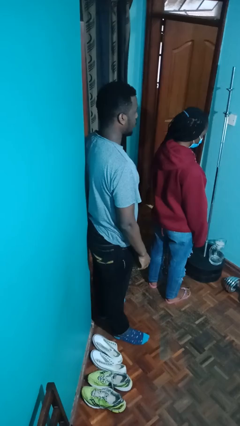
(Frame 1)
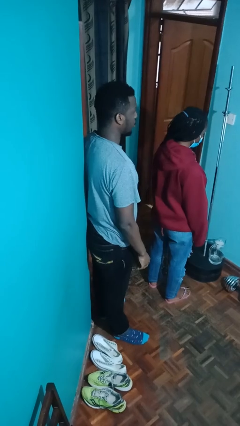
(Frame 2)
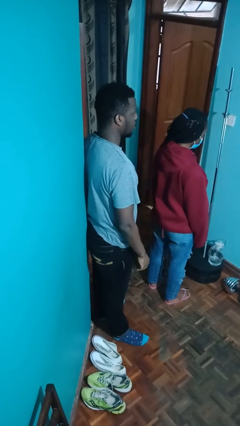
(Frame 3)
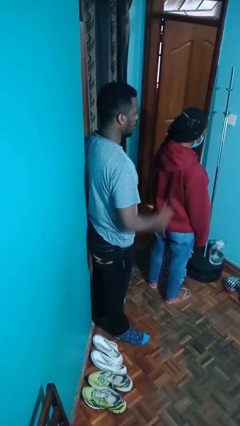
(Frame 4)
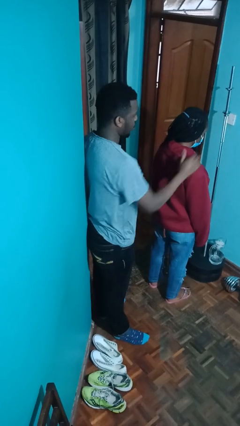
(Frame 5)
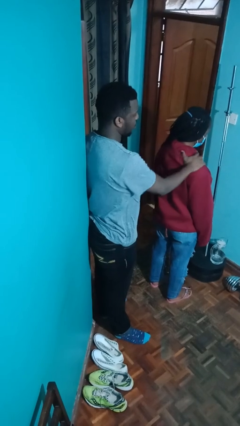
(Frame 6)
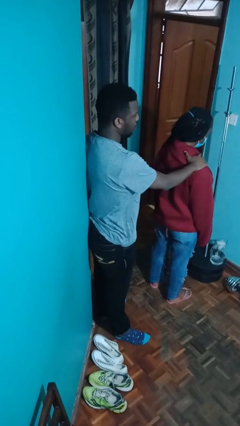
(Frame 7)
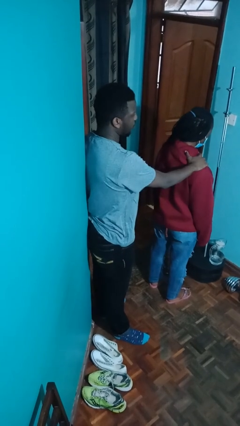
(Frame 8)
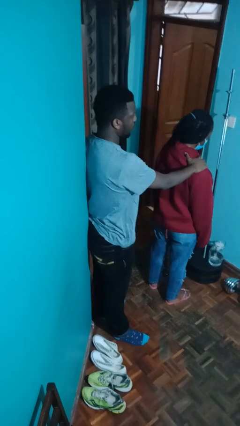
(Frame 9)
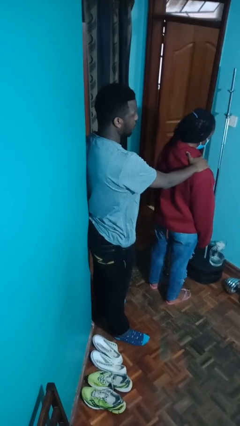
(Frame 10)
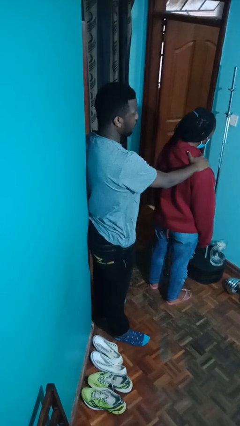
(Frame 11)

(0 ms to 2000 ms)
person grabs person by shoulder

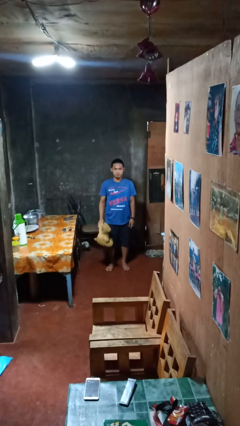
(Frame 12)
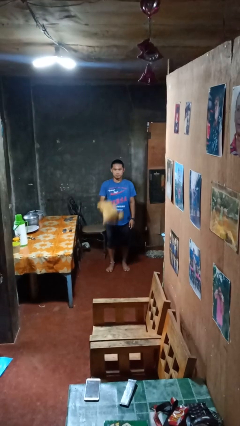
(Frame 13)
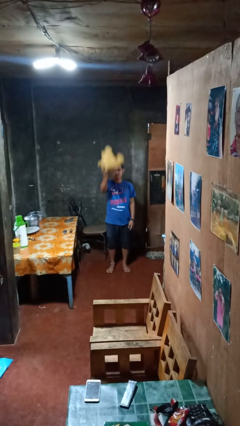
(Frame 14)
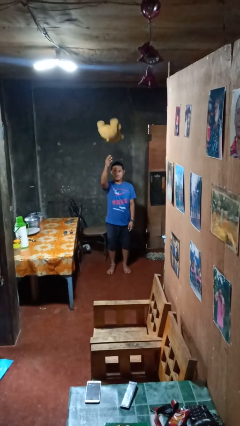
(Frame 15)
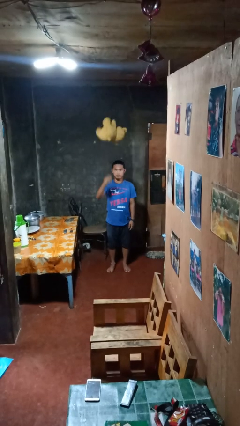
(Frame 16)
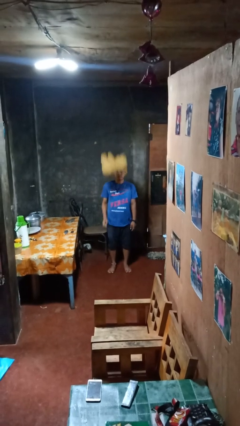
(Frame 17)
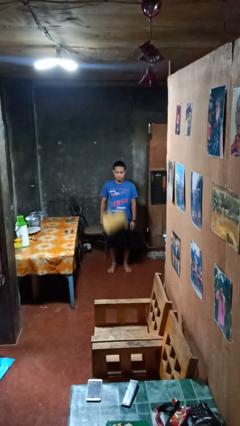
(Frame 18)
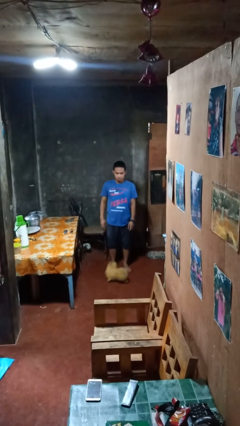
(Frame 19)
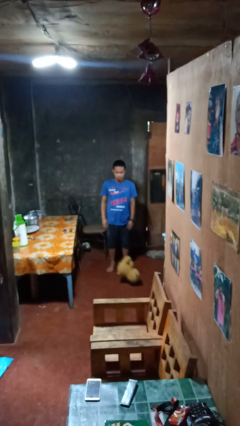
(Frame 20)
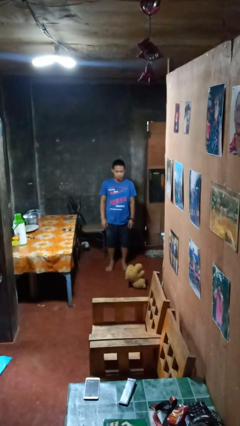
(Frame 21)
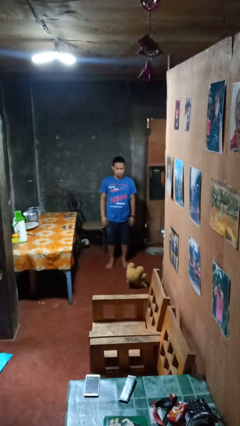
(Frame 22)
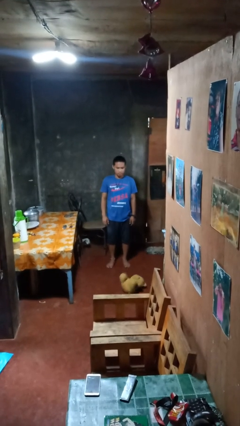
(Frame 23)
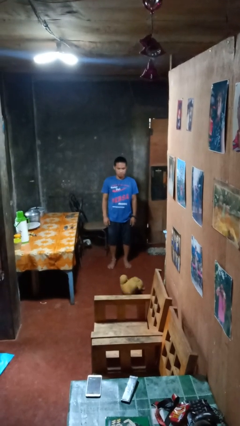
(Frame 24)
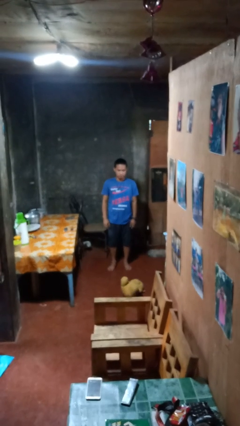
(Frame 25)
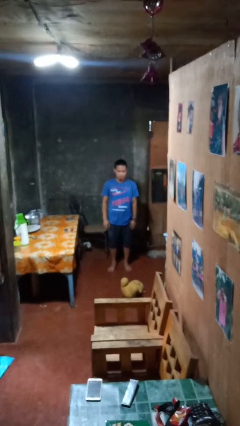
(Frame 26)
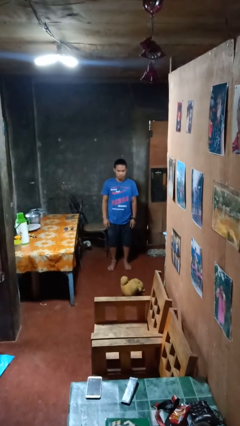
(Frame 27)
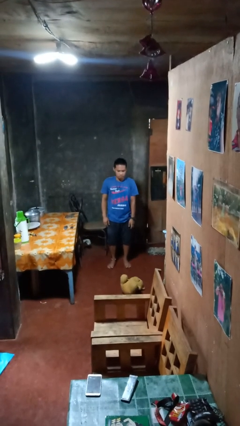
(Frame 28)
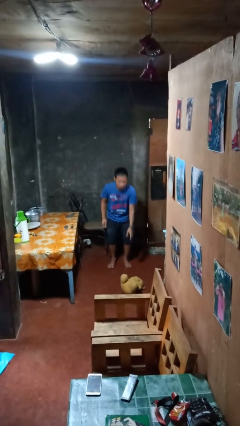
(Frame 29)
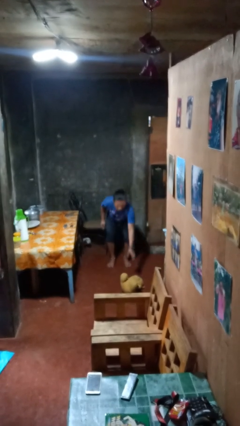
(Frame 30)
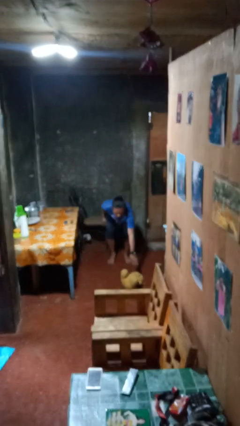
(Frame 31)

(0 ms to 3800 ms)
person throws object into air

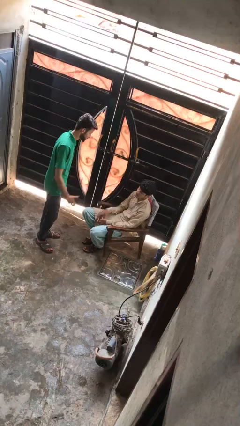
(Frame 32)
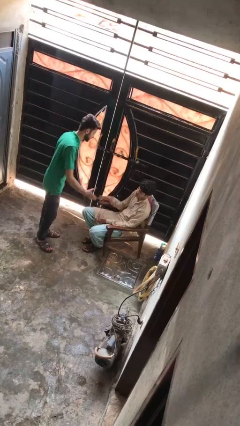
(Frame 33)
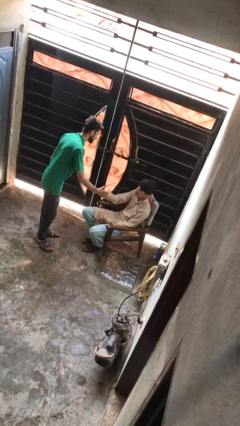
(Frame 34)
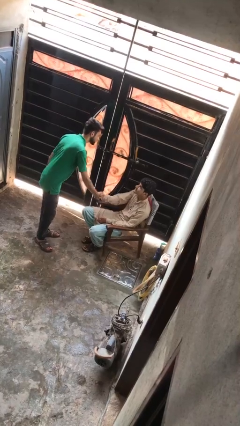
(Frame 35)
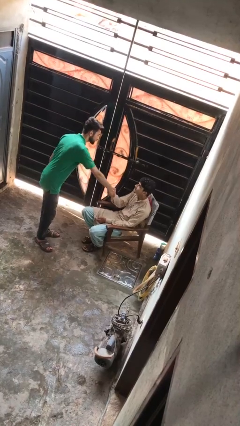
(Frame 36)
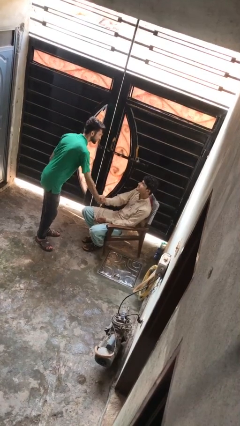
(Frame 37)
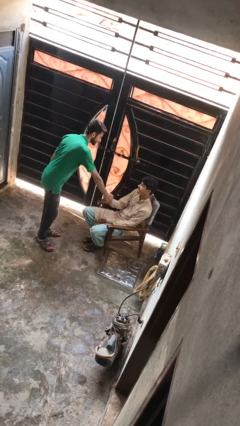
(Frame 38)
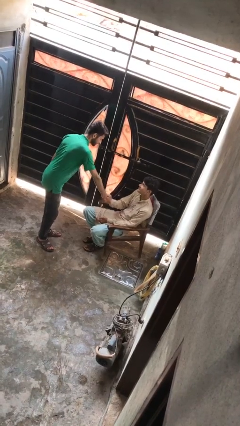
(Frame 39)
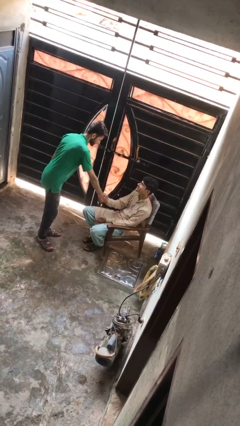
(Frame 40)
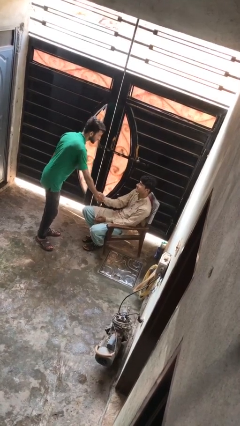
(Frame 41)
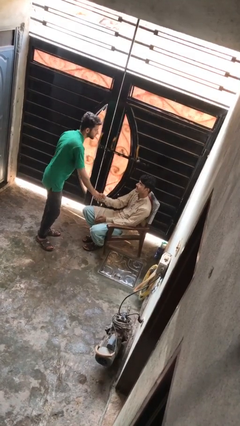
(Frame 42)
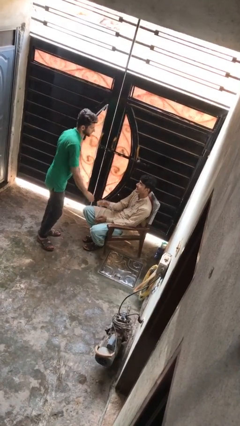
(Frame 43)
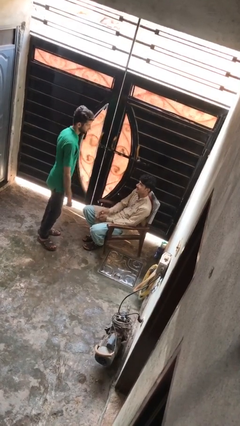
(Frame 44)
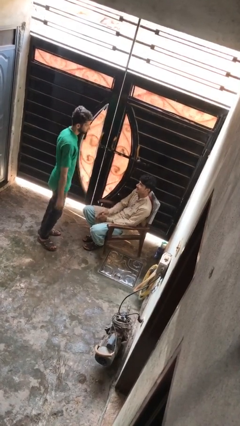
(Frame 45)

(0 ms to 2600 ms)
person shakes hand

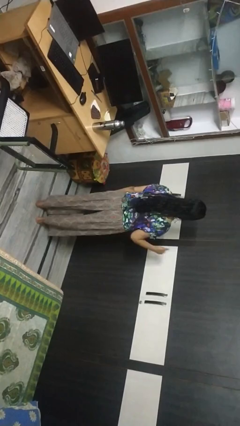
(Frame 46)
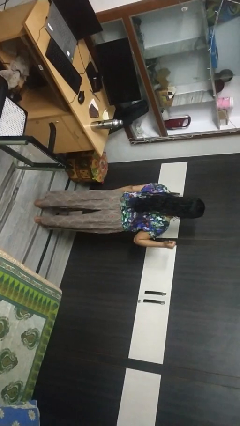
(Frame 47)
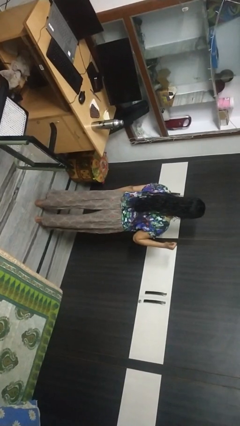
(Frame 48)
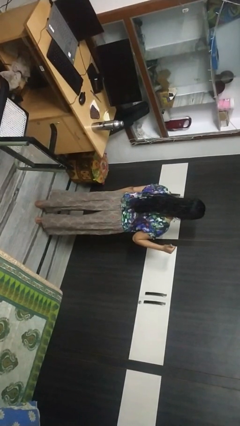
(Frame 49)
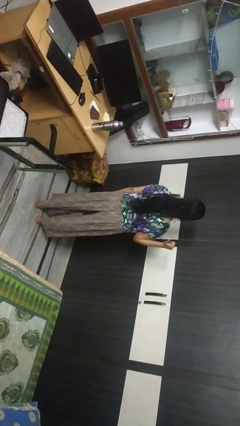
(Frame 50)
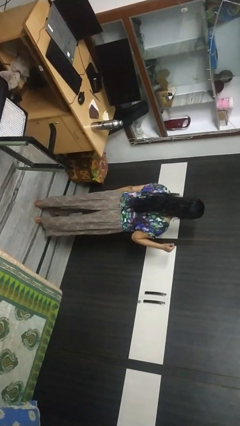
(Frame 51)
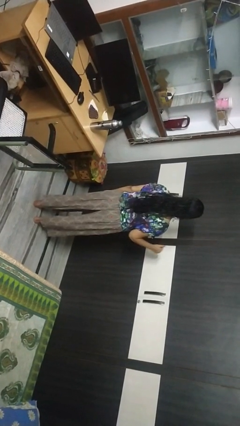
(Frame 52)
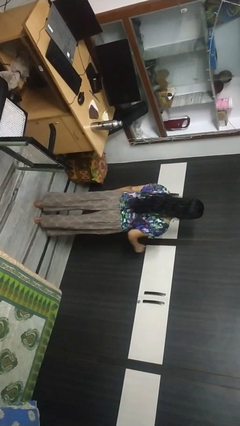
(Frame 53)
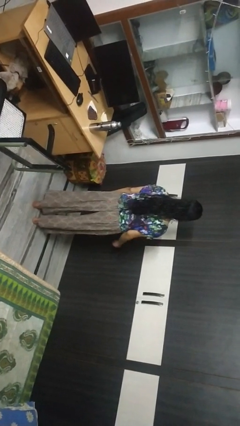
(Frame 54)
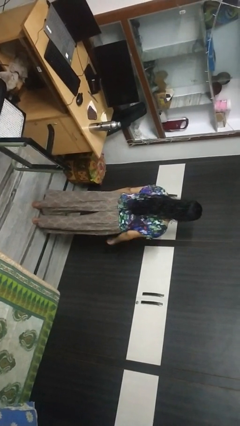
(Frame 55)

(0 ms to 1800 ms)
person gestures behind me

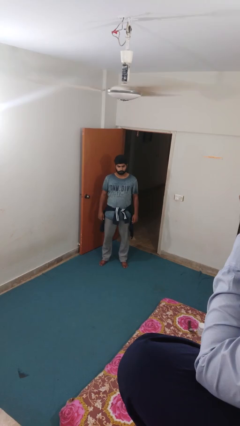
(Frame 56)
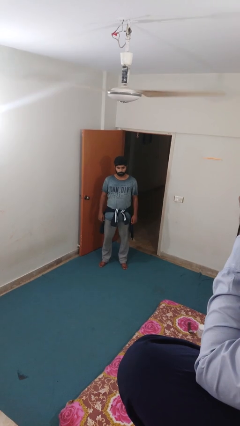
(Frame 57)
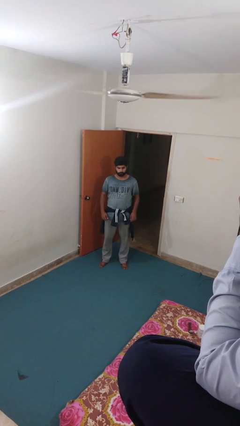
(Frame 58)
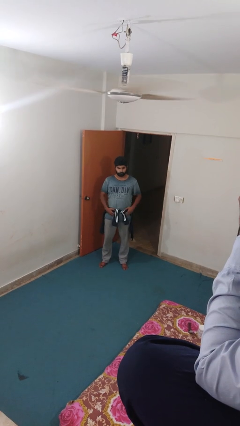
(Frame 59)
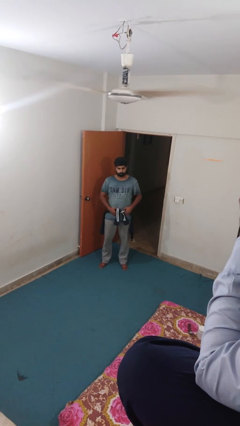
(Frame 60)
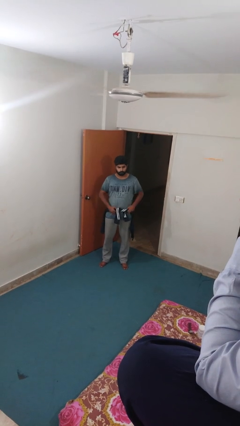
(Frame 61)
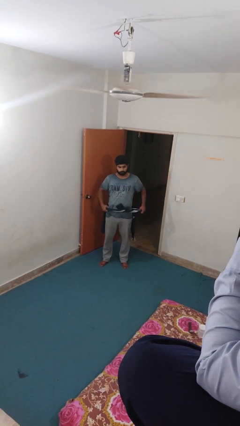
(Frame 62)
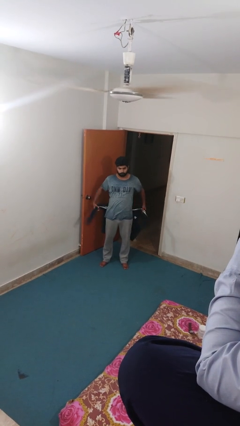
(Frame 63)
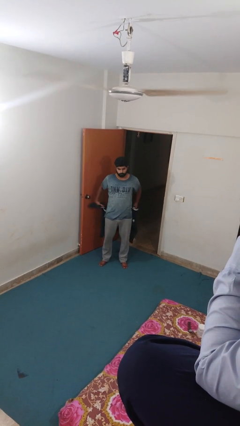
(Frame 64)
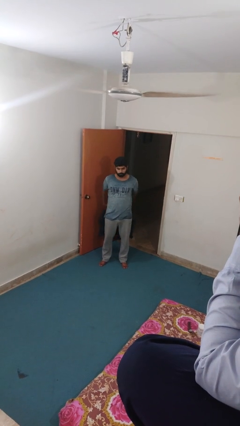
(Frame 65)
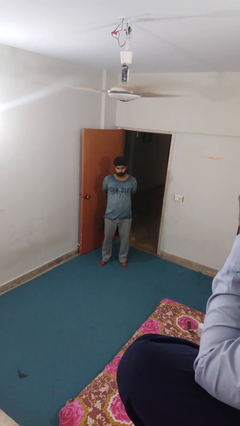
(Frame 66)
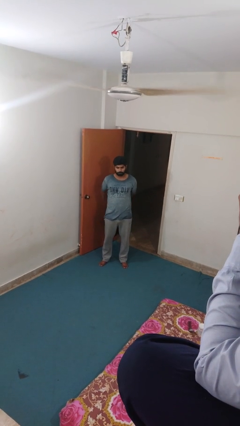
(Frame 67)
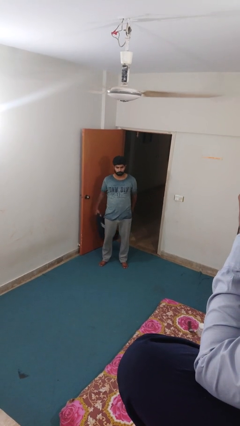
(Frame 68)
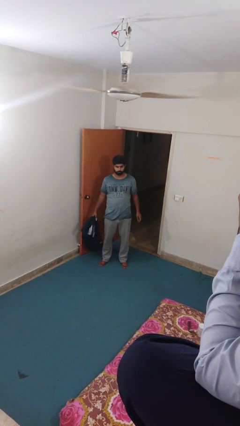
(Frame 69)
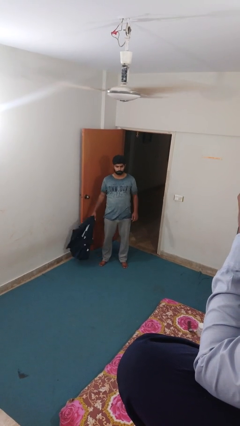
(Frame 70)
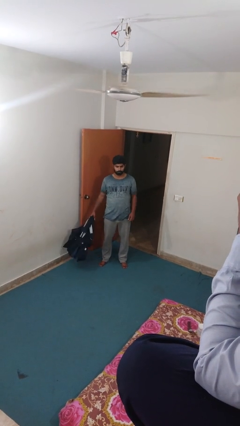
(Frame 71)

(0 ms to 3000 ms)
person unties jacket around waist

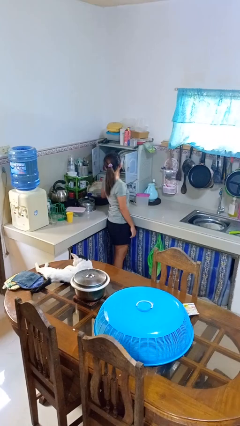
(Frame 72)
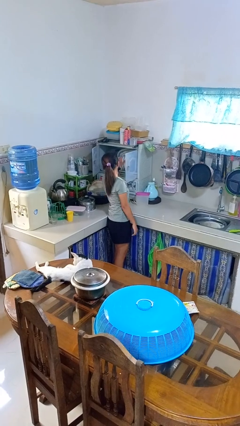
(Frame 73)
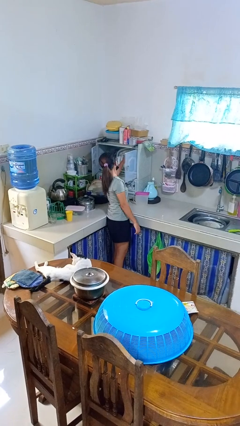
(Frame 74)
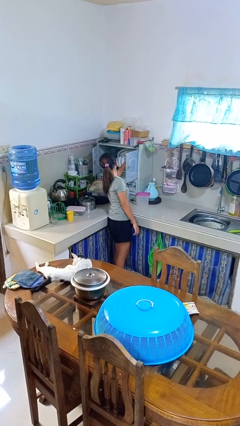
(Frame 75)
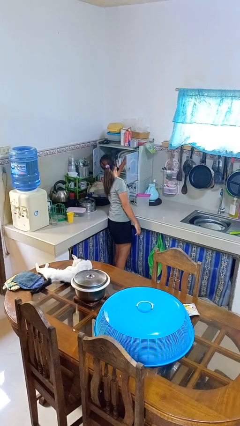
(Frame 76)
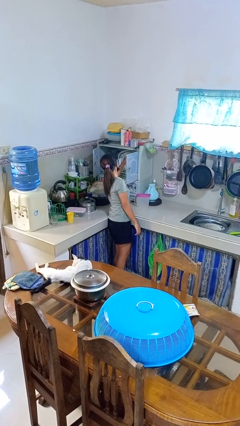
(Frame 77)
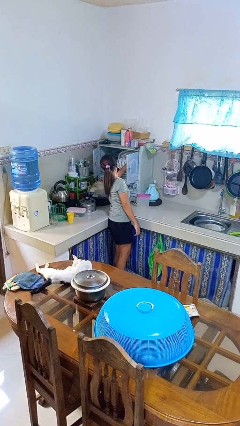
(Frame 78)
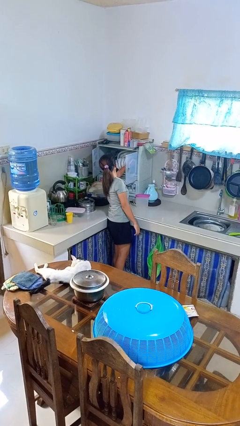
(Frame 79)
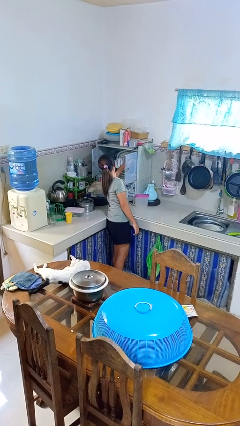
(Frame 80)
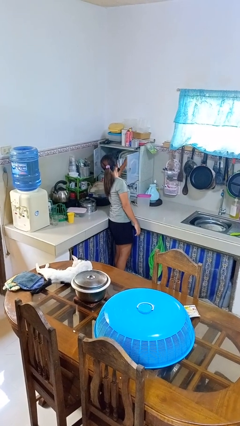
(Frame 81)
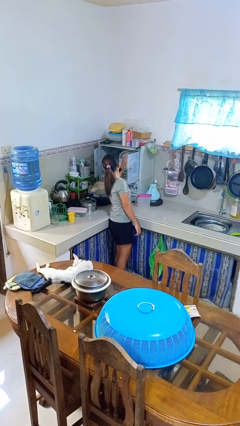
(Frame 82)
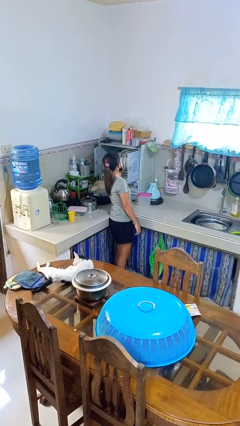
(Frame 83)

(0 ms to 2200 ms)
person searches in kitchen drawer

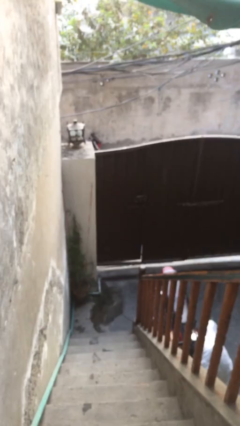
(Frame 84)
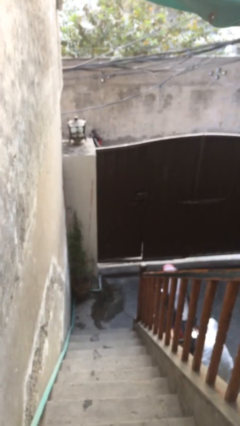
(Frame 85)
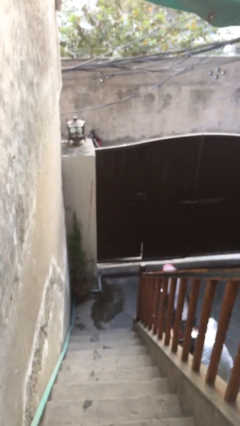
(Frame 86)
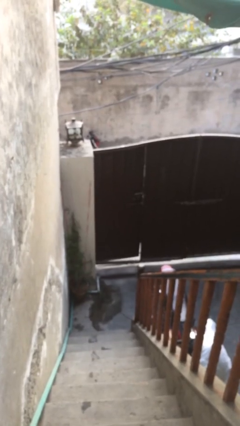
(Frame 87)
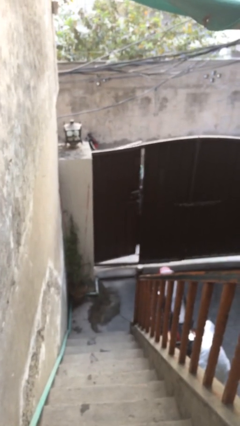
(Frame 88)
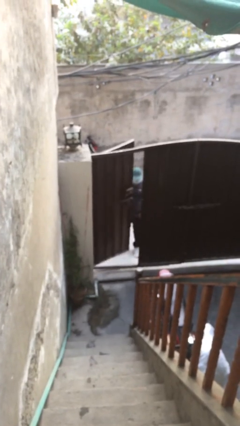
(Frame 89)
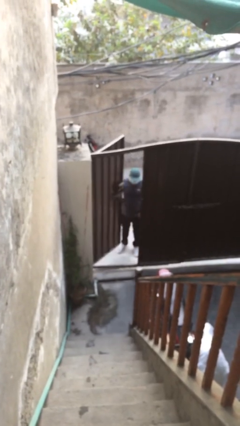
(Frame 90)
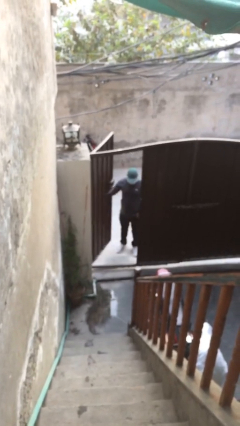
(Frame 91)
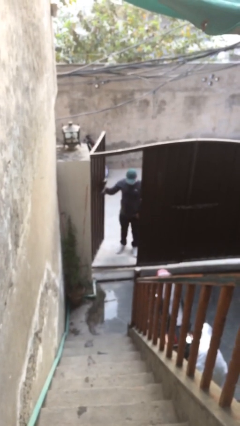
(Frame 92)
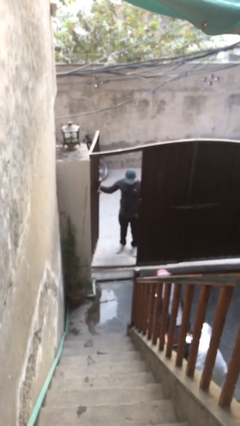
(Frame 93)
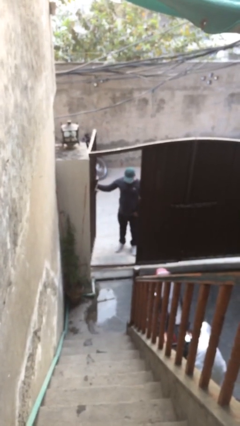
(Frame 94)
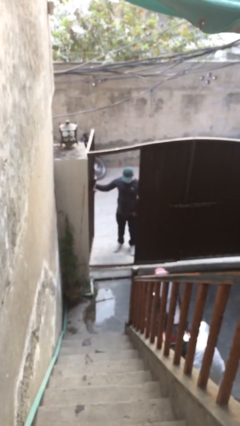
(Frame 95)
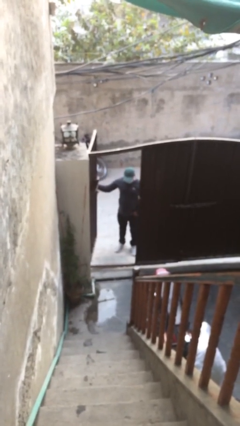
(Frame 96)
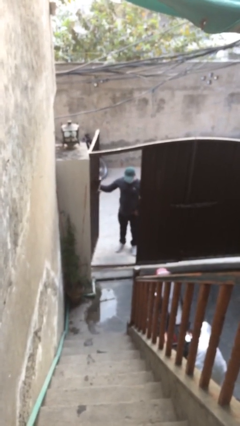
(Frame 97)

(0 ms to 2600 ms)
person opens facility door
